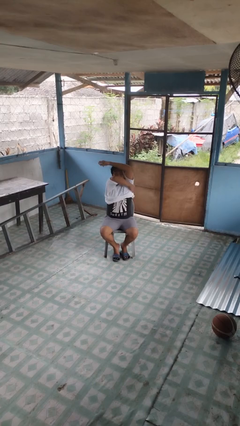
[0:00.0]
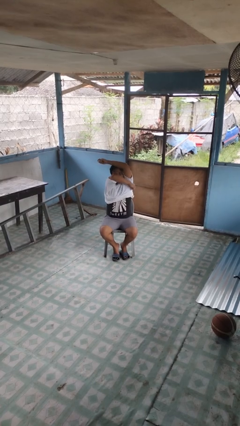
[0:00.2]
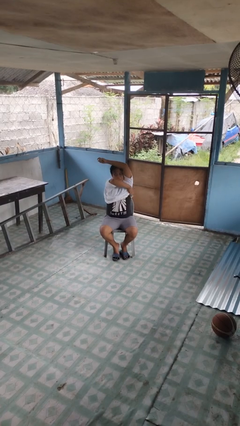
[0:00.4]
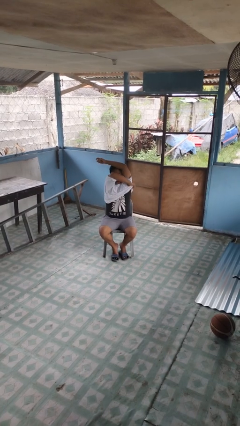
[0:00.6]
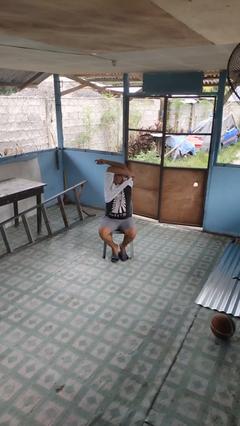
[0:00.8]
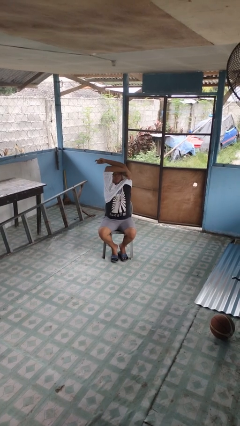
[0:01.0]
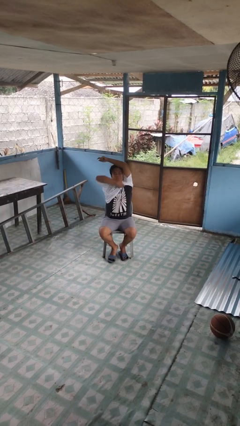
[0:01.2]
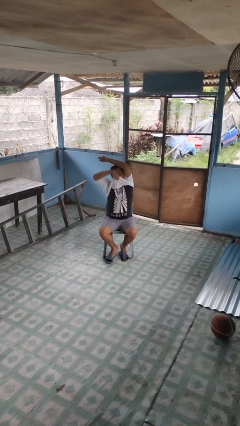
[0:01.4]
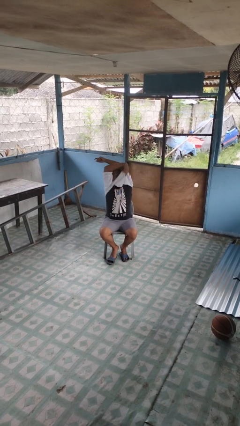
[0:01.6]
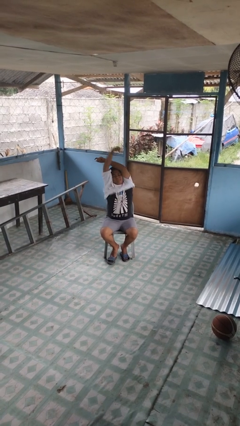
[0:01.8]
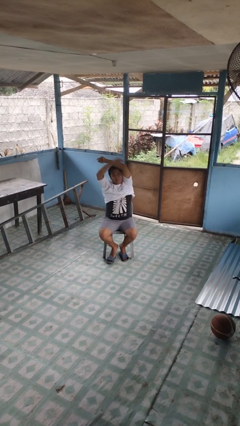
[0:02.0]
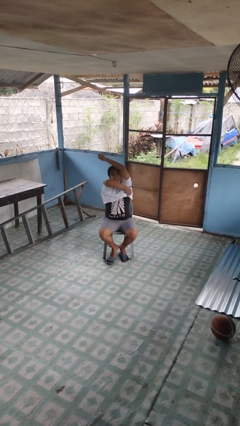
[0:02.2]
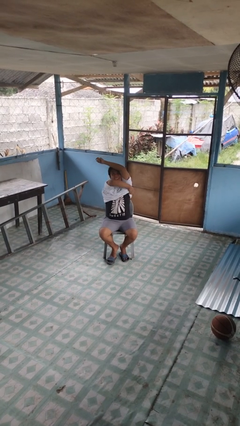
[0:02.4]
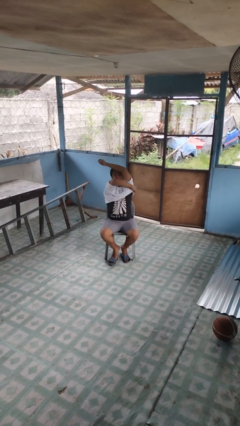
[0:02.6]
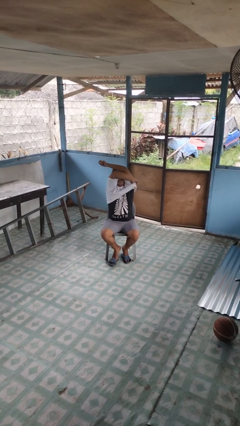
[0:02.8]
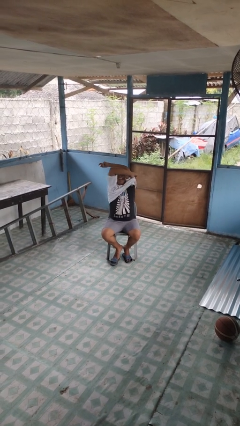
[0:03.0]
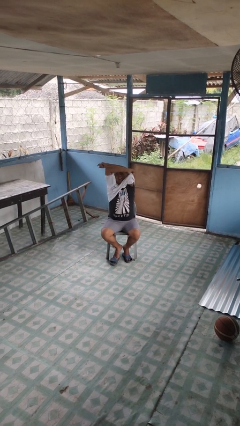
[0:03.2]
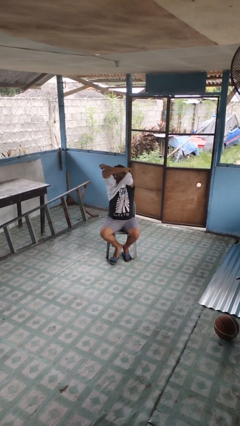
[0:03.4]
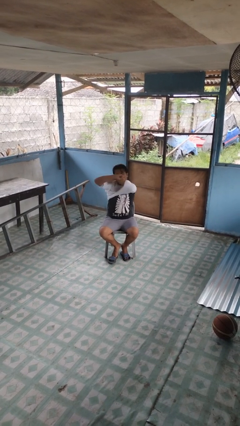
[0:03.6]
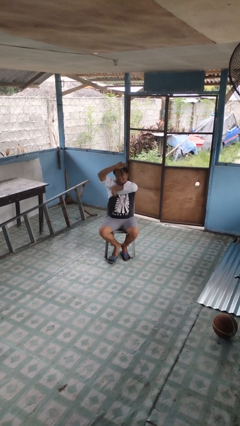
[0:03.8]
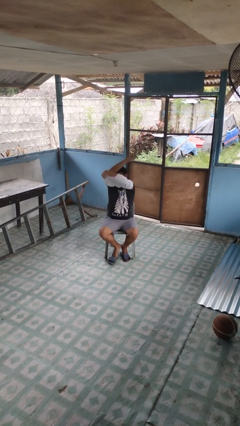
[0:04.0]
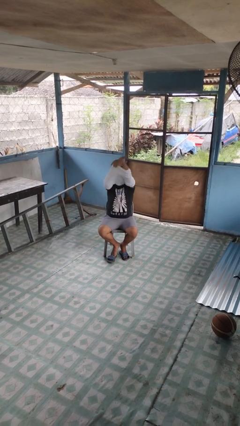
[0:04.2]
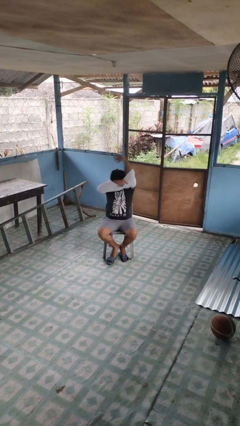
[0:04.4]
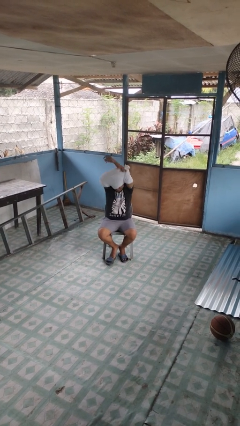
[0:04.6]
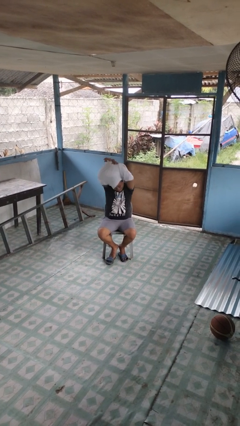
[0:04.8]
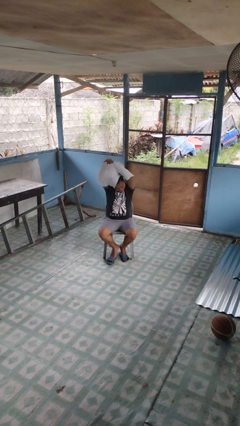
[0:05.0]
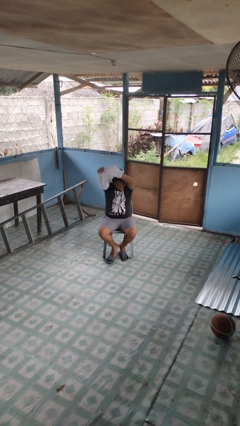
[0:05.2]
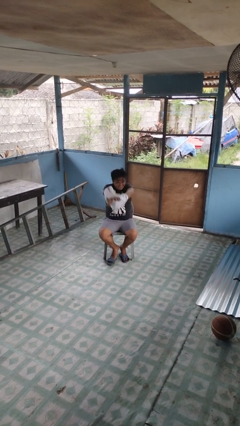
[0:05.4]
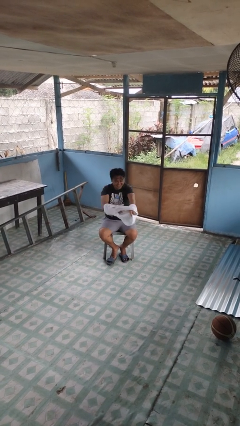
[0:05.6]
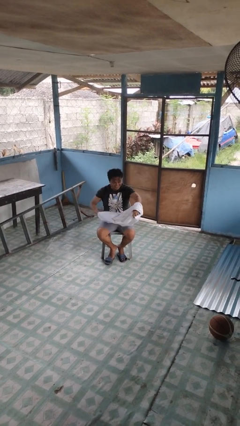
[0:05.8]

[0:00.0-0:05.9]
person takes off shirt

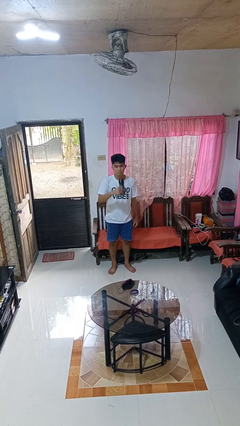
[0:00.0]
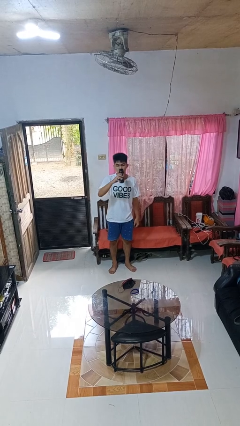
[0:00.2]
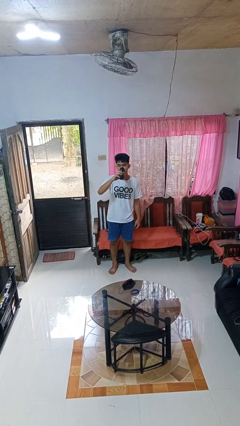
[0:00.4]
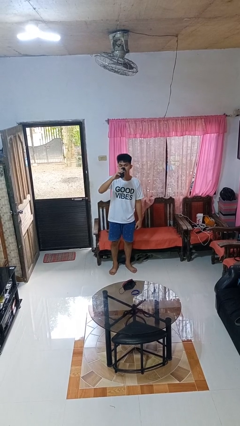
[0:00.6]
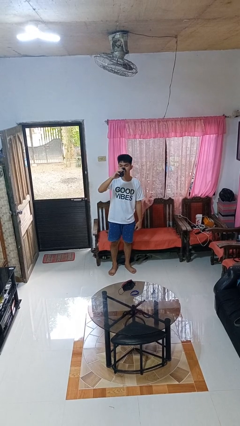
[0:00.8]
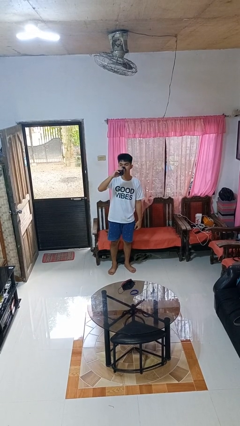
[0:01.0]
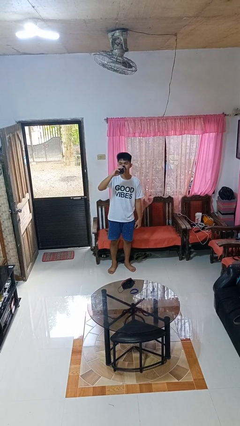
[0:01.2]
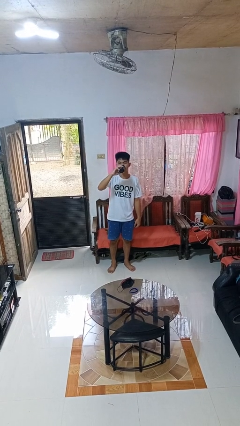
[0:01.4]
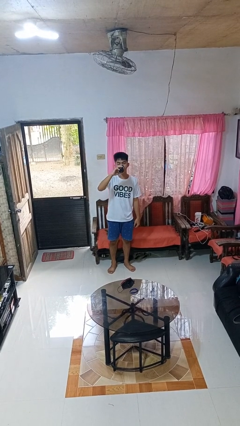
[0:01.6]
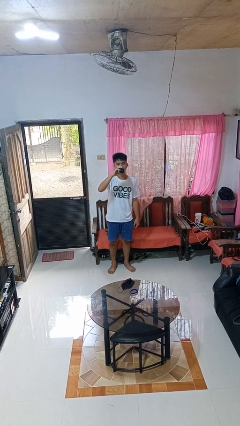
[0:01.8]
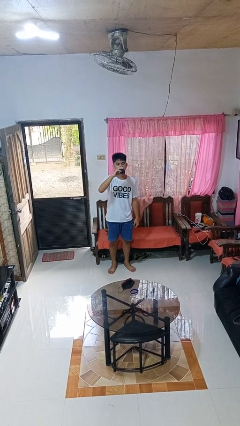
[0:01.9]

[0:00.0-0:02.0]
person drinks from bottle

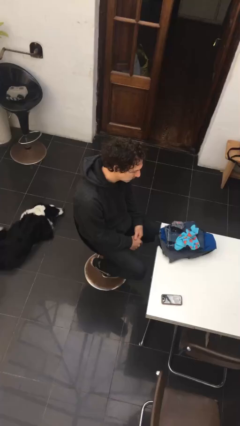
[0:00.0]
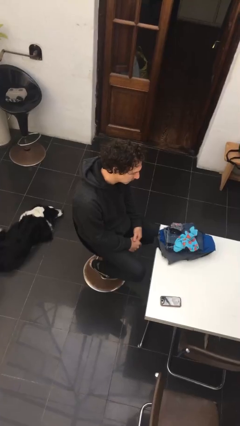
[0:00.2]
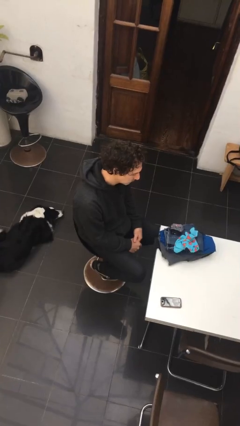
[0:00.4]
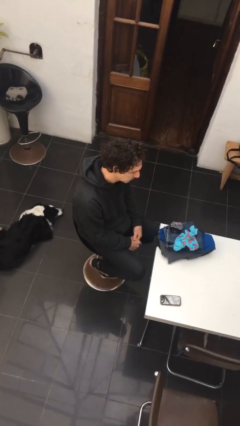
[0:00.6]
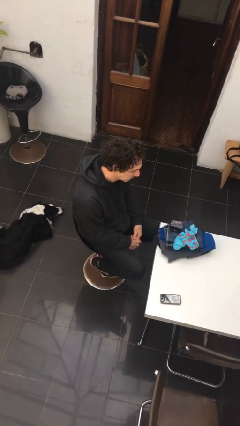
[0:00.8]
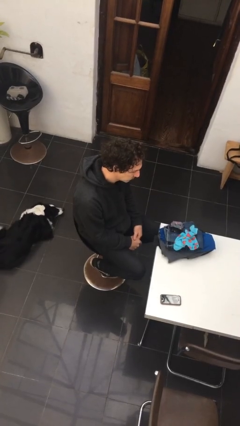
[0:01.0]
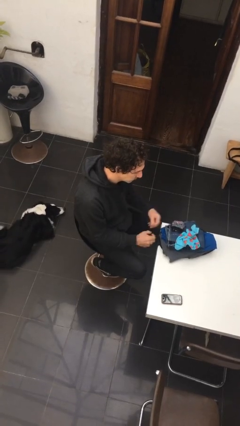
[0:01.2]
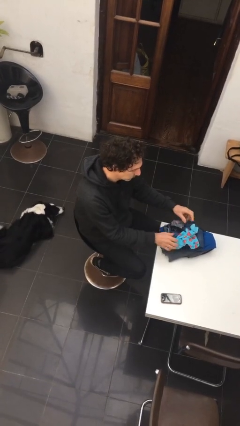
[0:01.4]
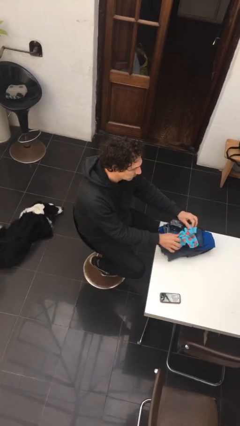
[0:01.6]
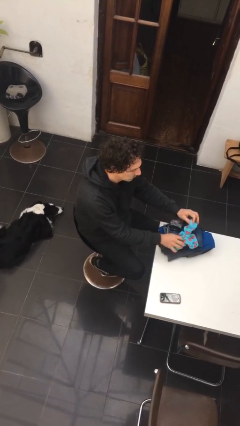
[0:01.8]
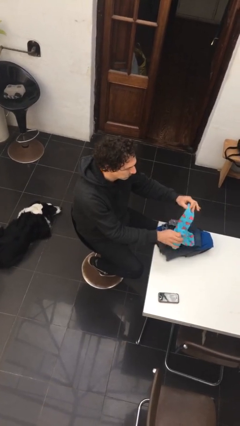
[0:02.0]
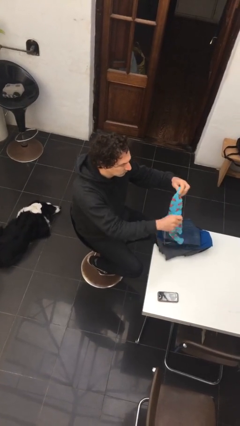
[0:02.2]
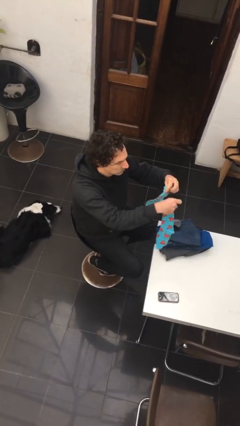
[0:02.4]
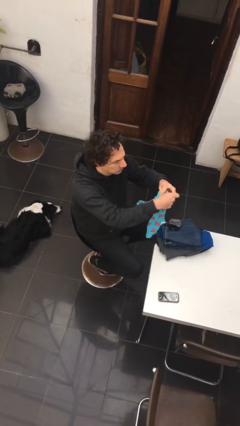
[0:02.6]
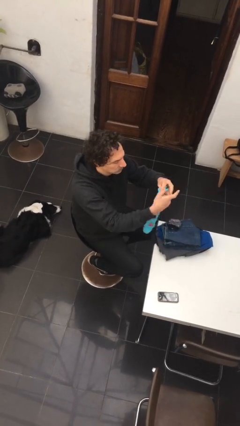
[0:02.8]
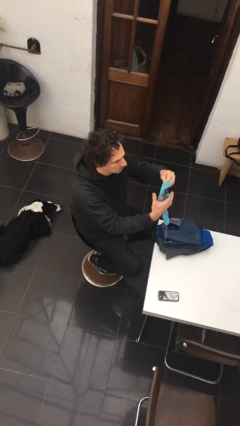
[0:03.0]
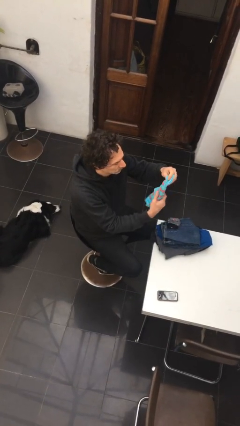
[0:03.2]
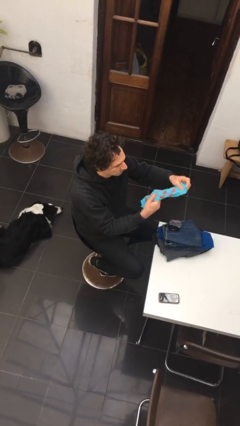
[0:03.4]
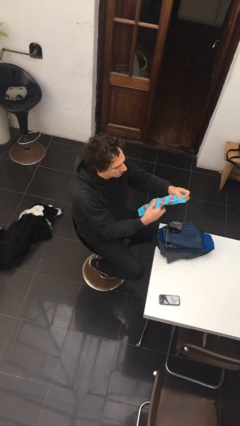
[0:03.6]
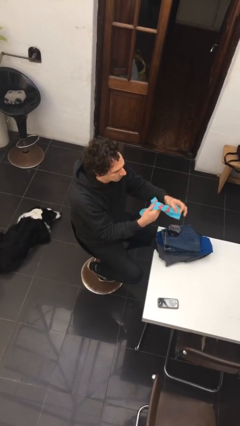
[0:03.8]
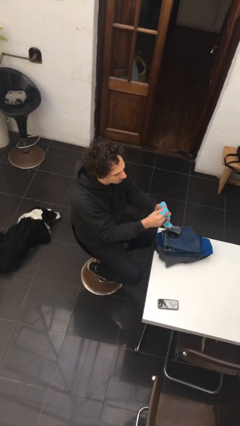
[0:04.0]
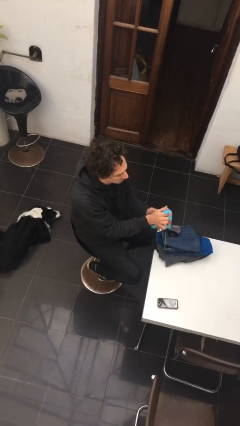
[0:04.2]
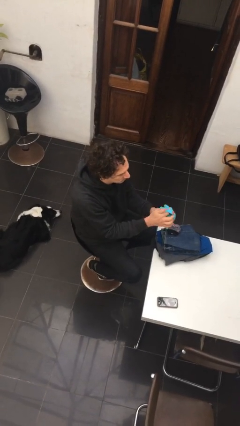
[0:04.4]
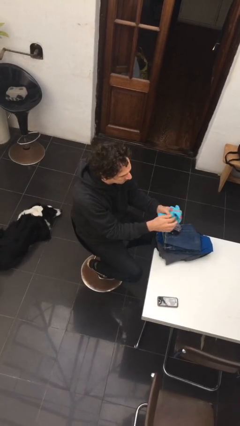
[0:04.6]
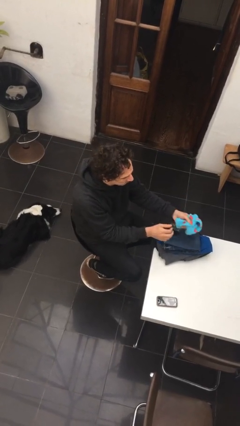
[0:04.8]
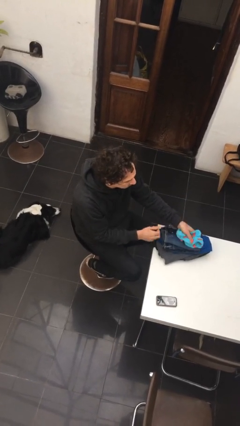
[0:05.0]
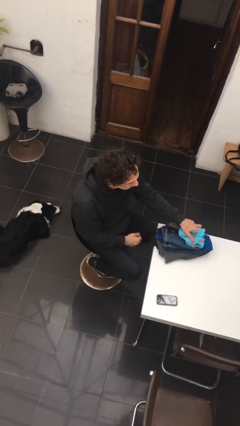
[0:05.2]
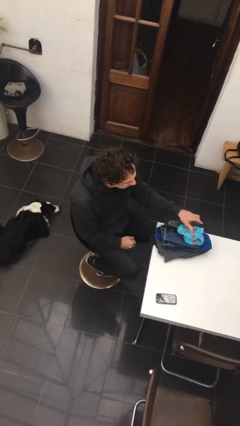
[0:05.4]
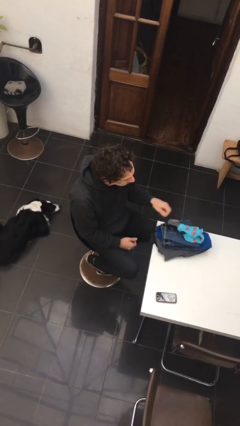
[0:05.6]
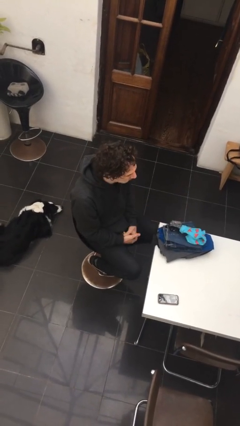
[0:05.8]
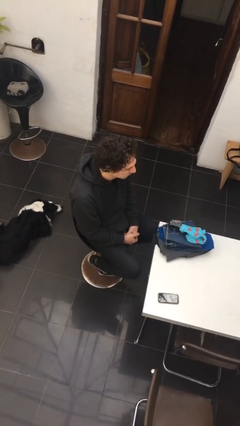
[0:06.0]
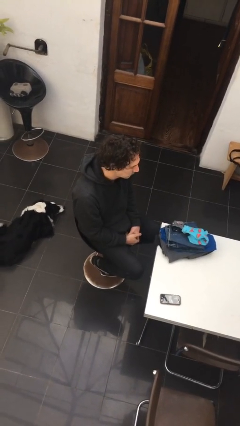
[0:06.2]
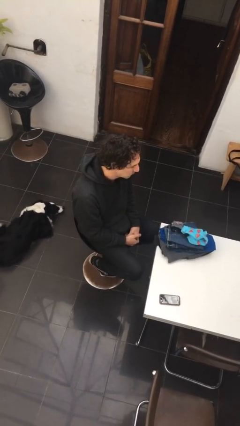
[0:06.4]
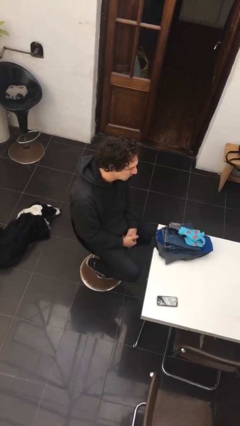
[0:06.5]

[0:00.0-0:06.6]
person folds socks

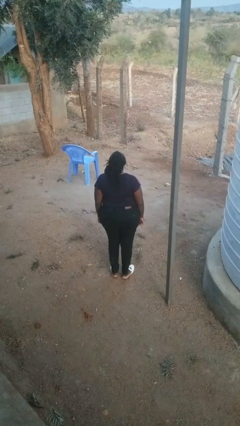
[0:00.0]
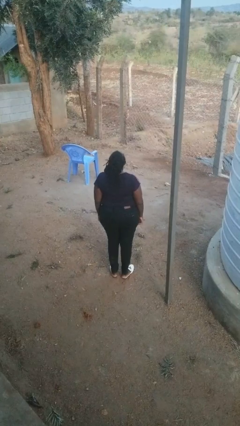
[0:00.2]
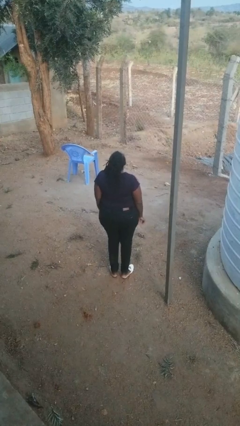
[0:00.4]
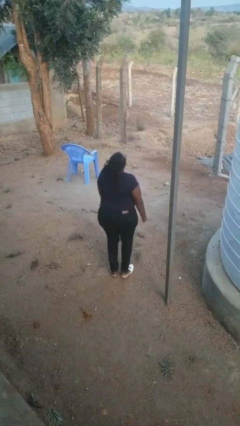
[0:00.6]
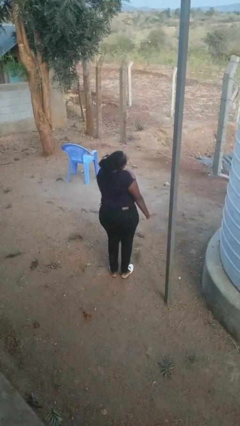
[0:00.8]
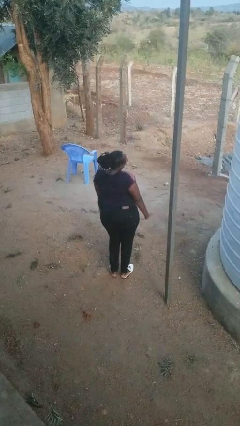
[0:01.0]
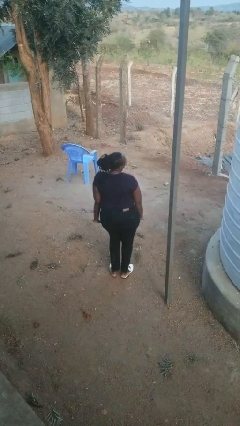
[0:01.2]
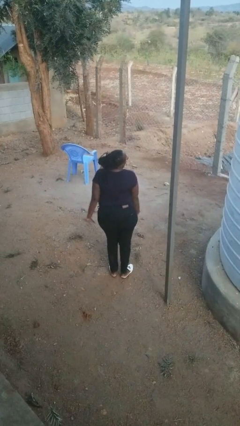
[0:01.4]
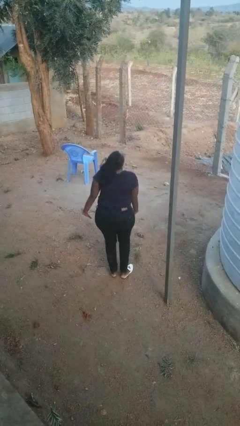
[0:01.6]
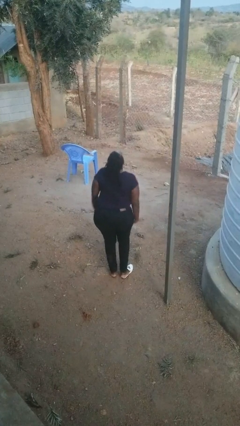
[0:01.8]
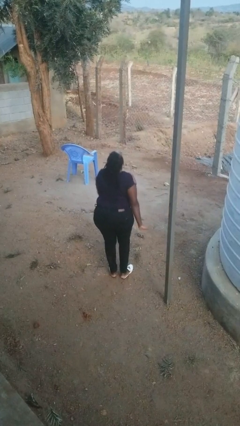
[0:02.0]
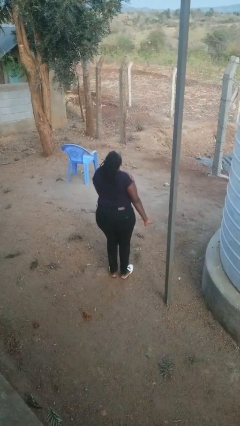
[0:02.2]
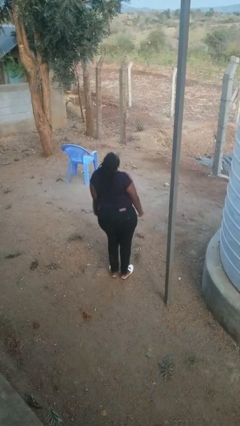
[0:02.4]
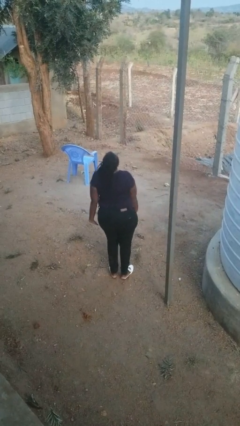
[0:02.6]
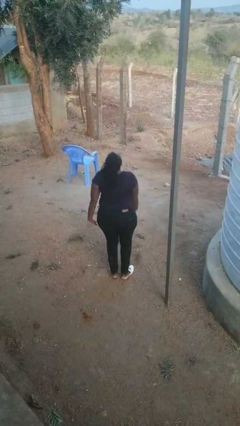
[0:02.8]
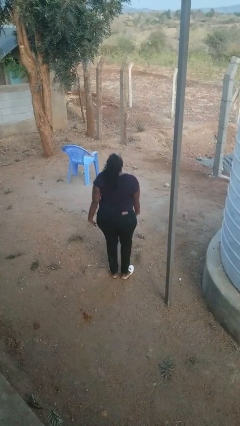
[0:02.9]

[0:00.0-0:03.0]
person dances in place

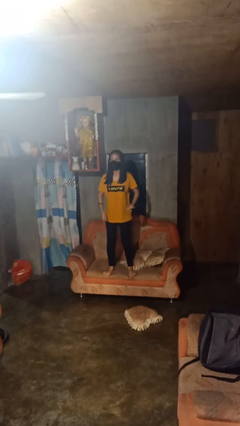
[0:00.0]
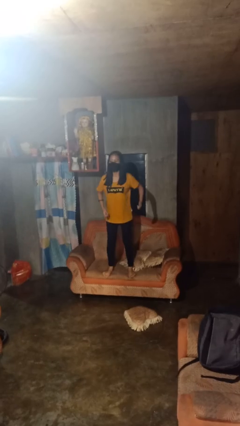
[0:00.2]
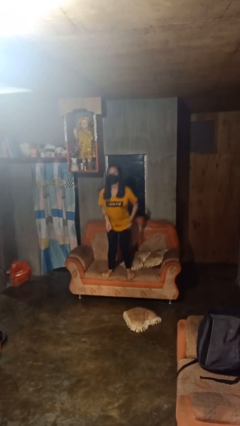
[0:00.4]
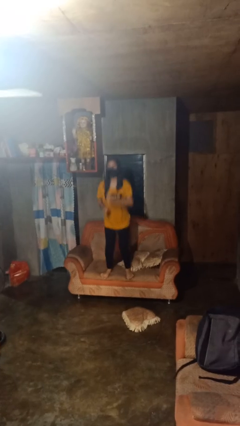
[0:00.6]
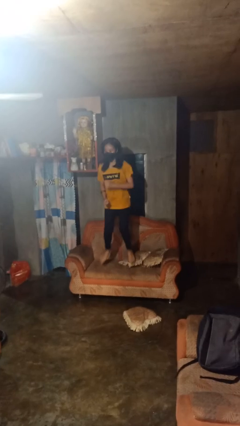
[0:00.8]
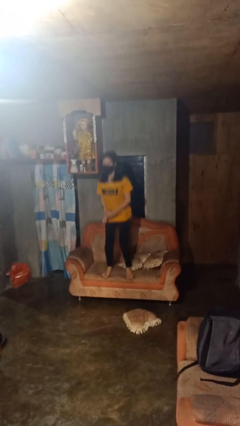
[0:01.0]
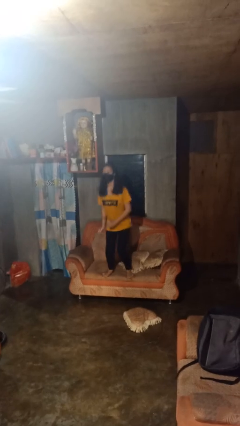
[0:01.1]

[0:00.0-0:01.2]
person jumps on couch
